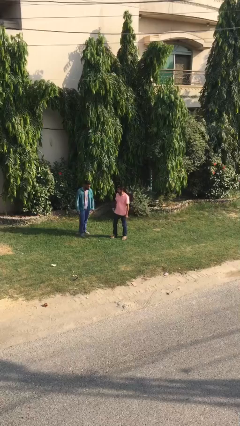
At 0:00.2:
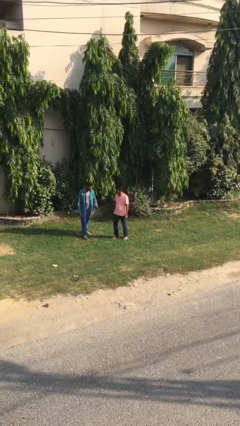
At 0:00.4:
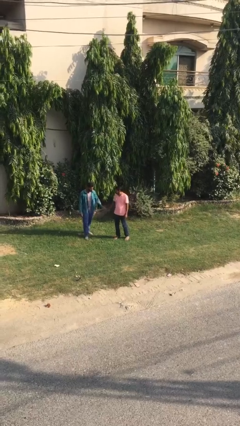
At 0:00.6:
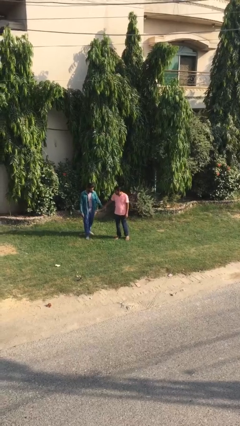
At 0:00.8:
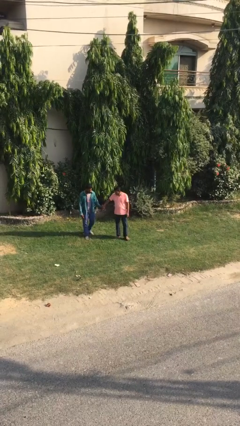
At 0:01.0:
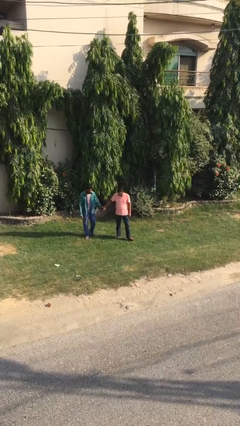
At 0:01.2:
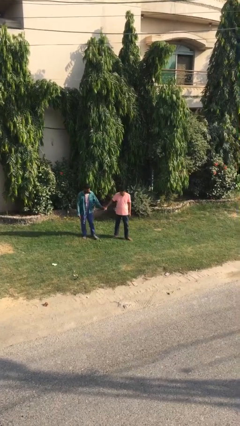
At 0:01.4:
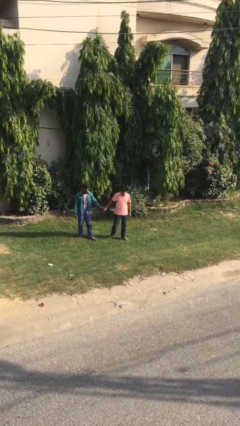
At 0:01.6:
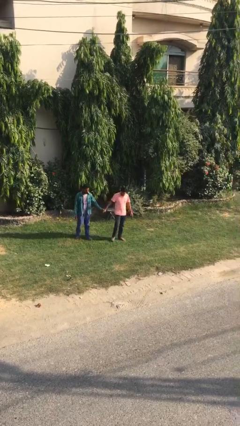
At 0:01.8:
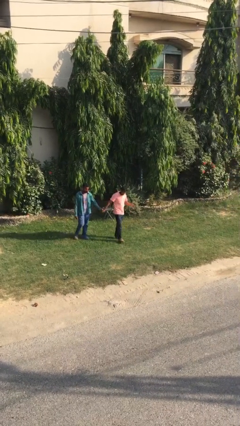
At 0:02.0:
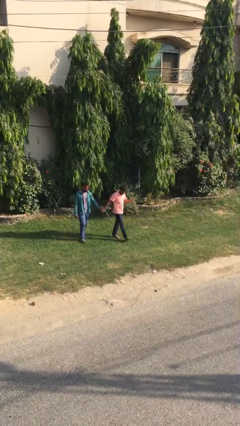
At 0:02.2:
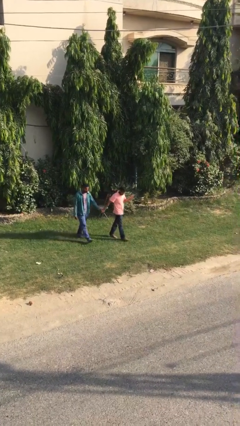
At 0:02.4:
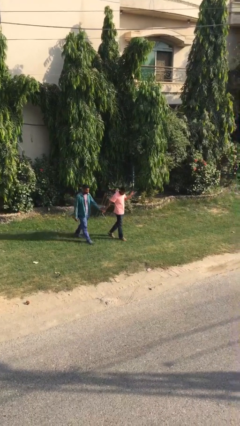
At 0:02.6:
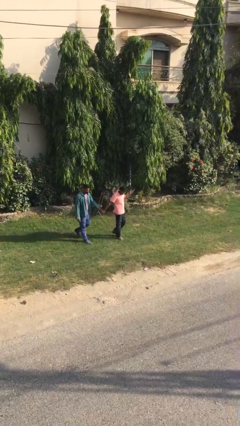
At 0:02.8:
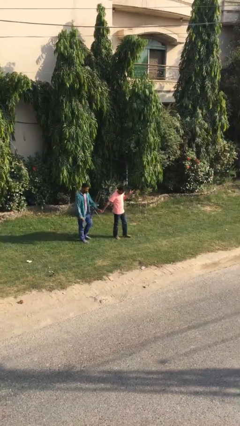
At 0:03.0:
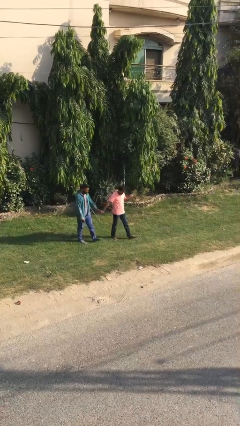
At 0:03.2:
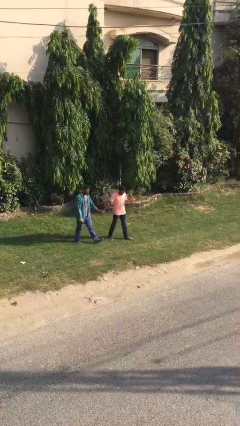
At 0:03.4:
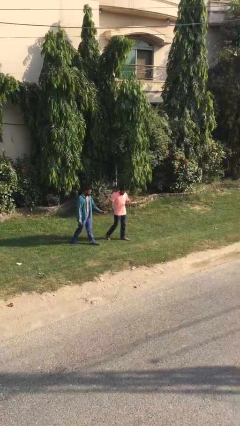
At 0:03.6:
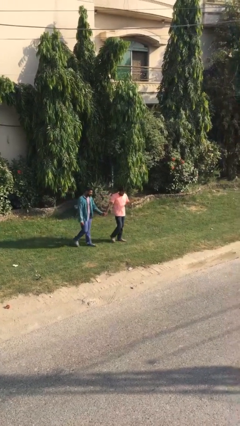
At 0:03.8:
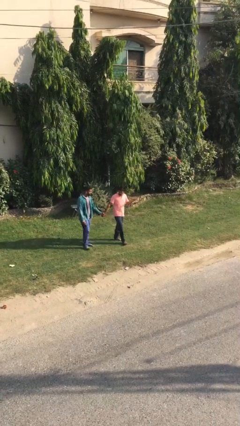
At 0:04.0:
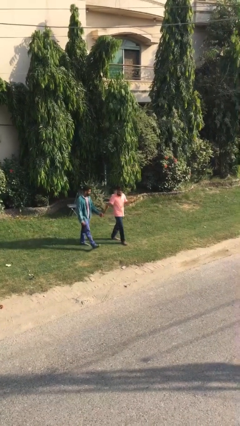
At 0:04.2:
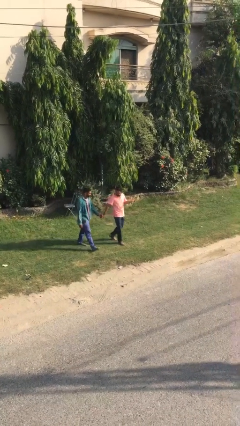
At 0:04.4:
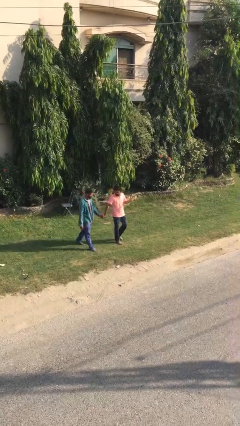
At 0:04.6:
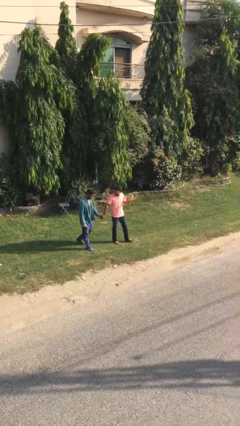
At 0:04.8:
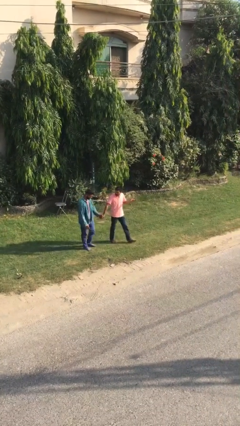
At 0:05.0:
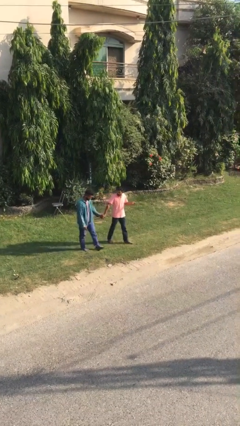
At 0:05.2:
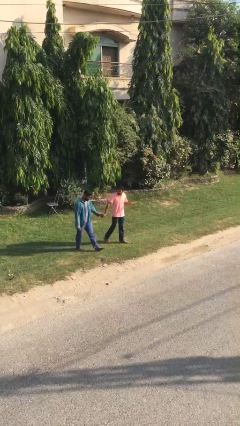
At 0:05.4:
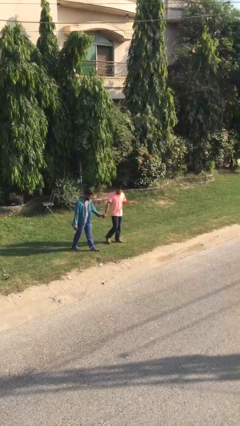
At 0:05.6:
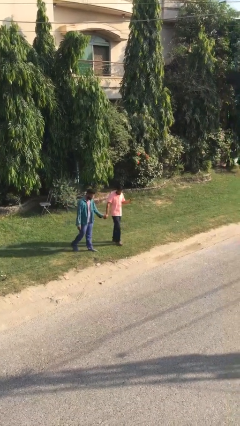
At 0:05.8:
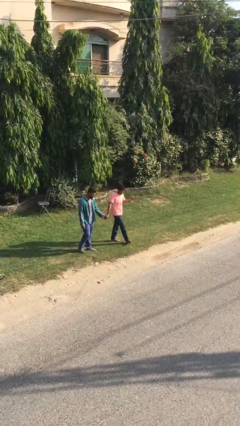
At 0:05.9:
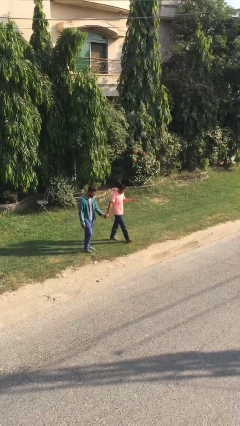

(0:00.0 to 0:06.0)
person holds hand

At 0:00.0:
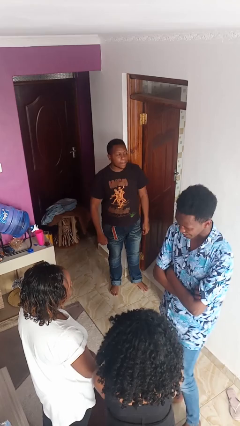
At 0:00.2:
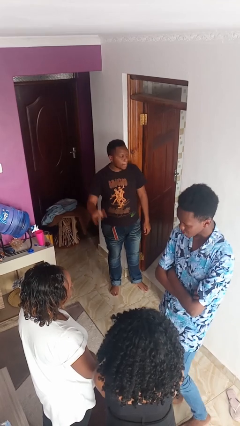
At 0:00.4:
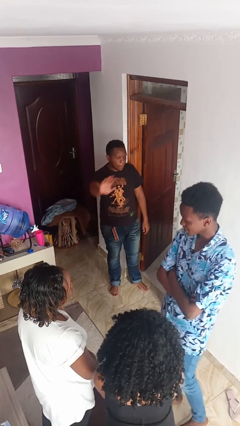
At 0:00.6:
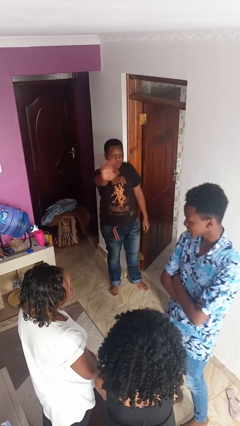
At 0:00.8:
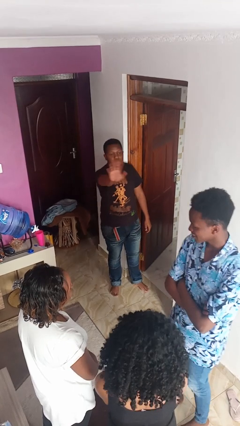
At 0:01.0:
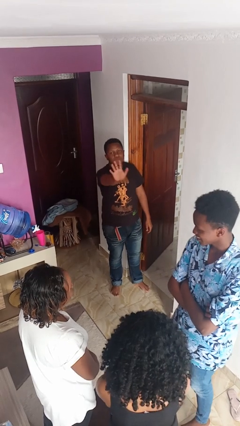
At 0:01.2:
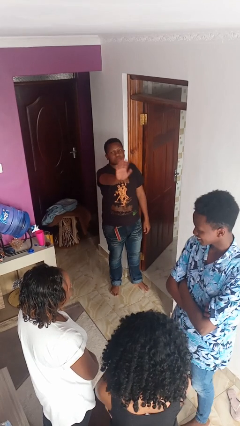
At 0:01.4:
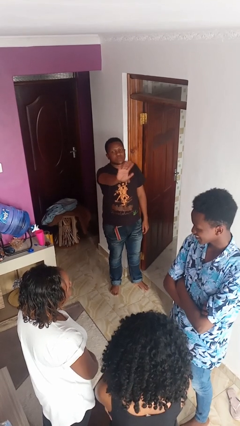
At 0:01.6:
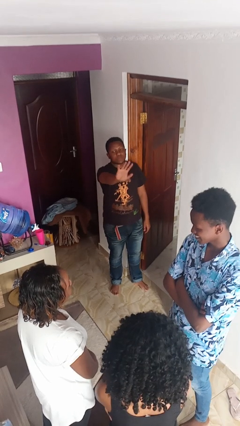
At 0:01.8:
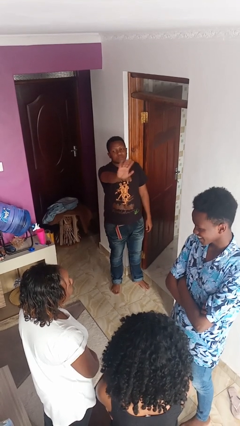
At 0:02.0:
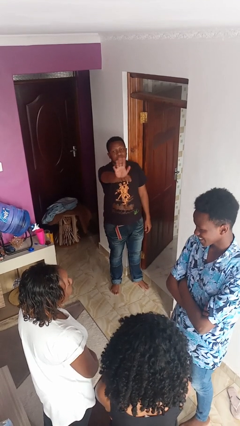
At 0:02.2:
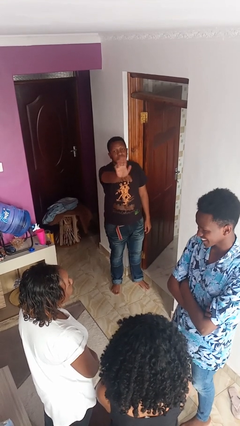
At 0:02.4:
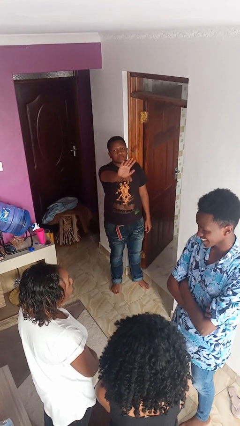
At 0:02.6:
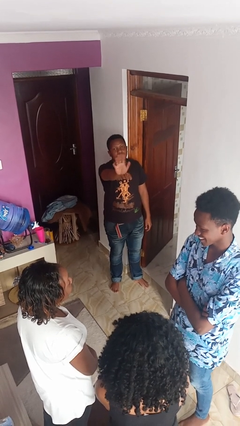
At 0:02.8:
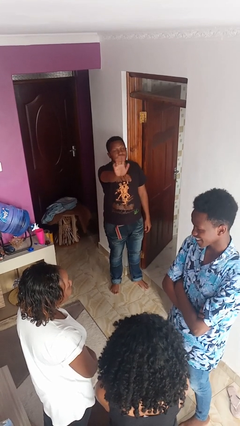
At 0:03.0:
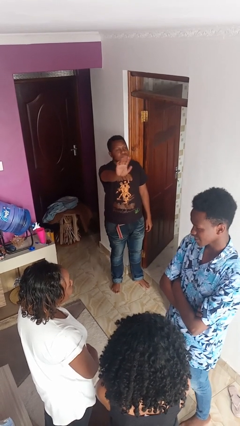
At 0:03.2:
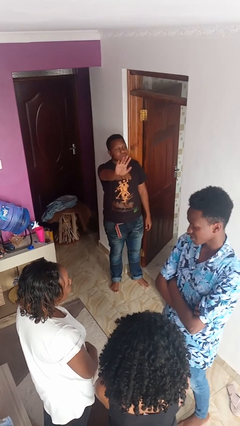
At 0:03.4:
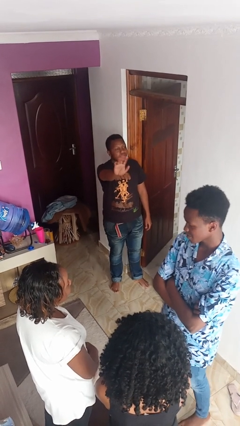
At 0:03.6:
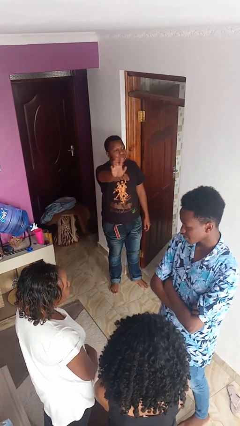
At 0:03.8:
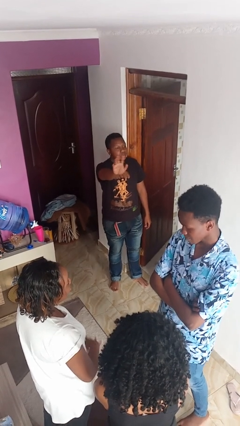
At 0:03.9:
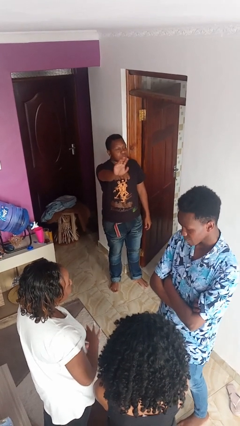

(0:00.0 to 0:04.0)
person waves at person

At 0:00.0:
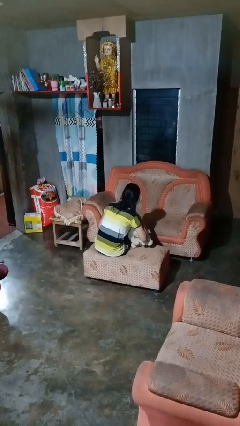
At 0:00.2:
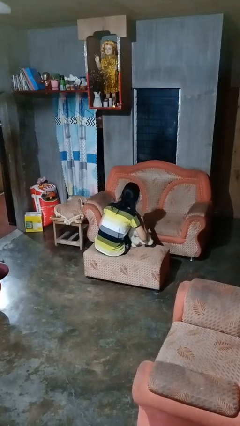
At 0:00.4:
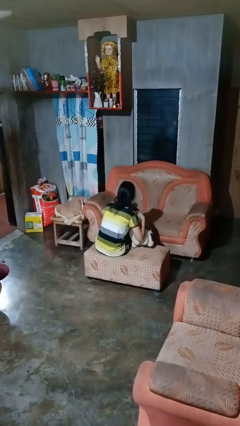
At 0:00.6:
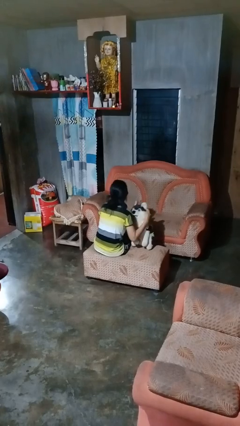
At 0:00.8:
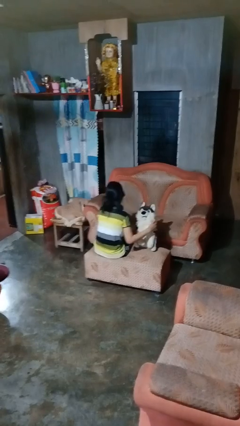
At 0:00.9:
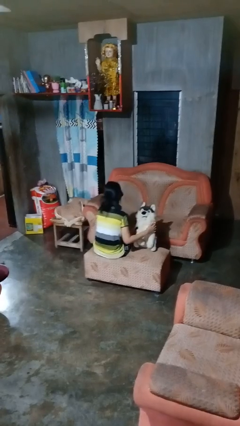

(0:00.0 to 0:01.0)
person hugs stuffed animal

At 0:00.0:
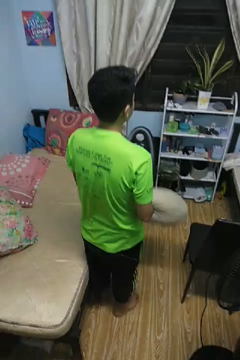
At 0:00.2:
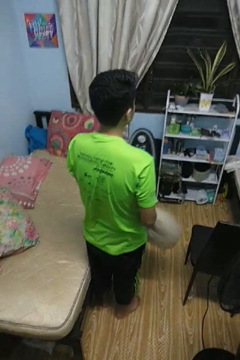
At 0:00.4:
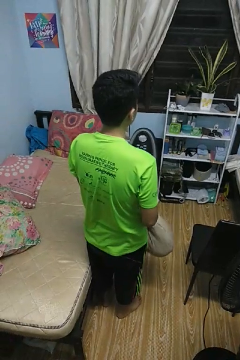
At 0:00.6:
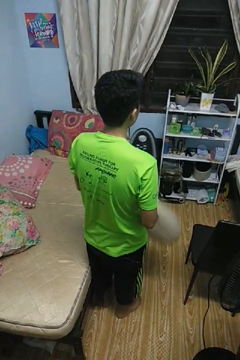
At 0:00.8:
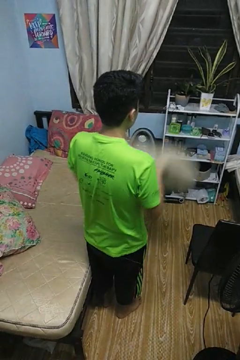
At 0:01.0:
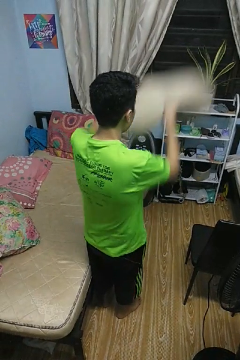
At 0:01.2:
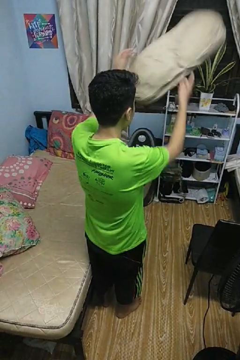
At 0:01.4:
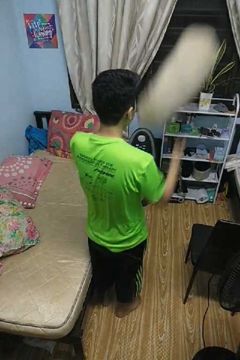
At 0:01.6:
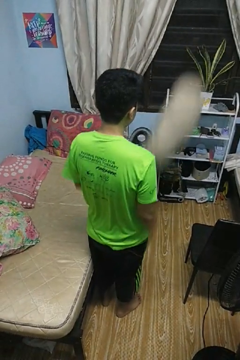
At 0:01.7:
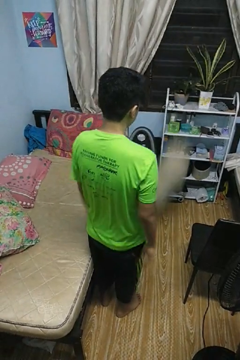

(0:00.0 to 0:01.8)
person throws object into air

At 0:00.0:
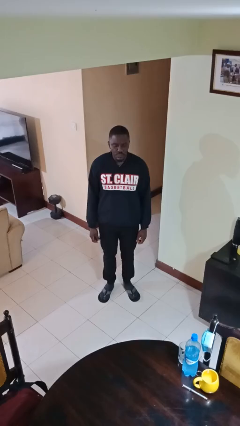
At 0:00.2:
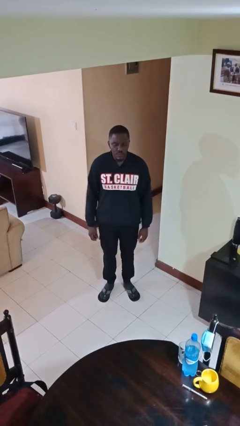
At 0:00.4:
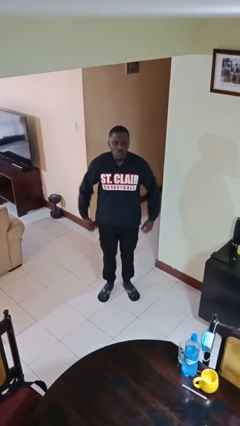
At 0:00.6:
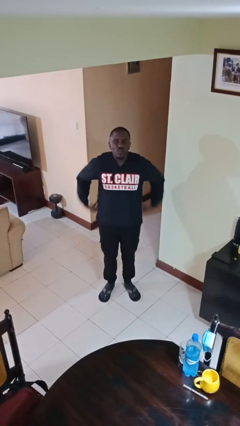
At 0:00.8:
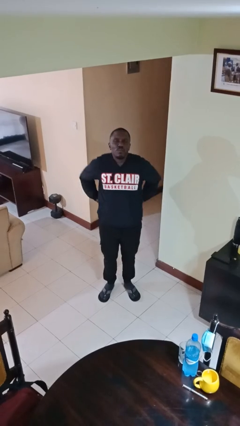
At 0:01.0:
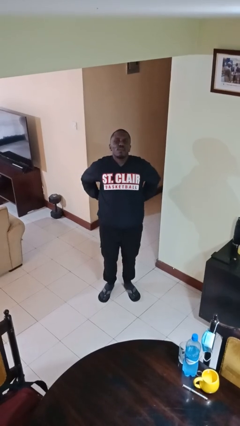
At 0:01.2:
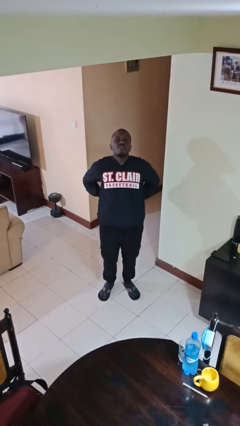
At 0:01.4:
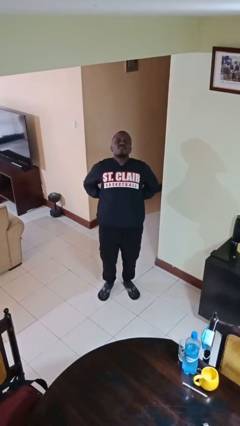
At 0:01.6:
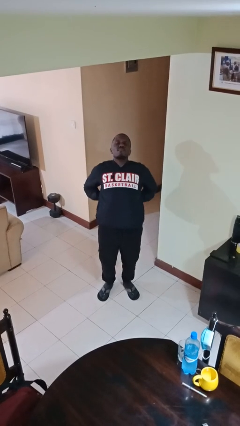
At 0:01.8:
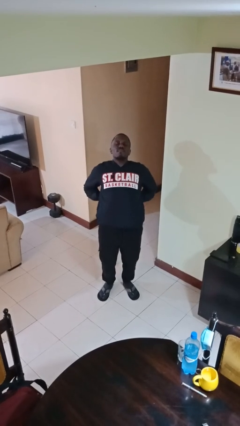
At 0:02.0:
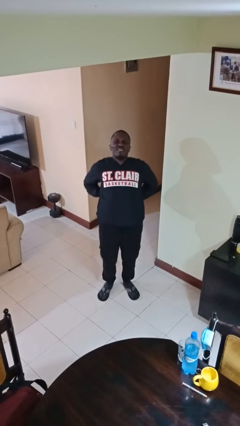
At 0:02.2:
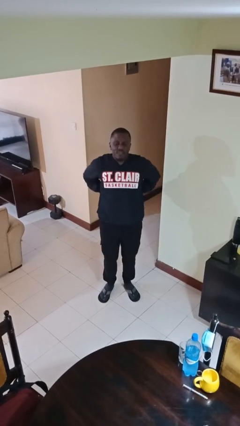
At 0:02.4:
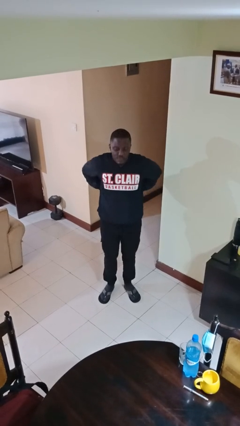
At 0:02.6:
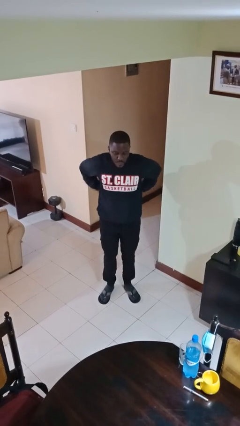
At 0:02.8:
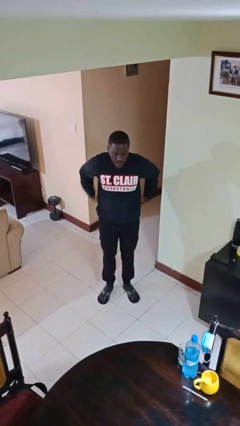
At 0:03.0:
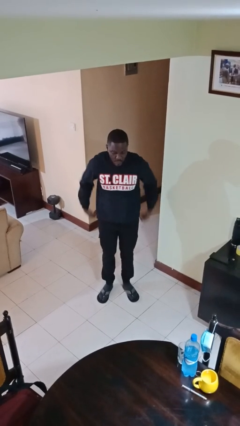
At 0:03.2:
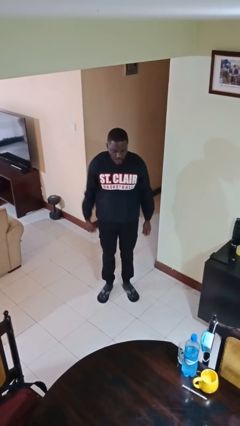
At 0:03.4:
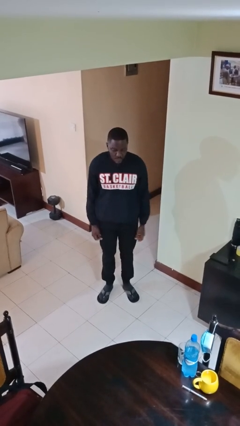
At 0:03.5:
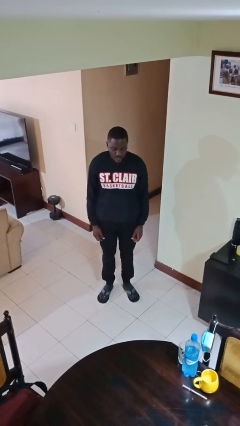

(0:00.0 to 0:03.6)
person stretches back

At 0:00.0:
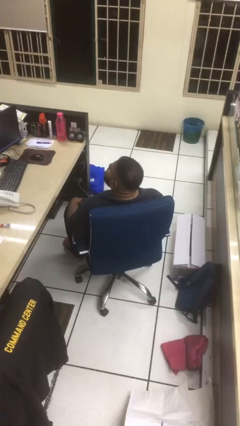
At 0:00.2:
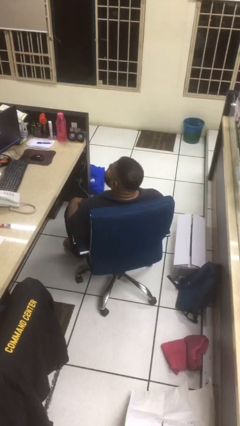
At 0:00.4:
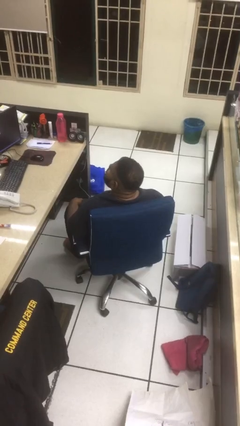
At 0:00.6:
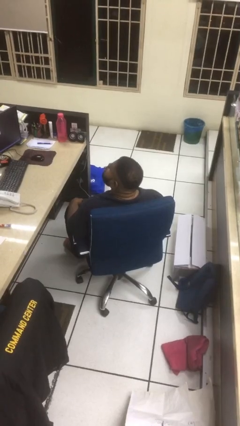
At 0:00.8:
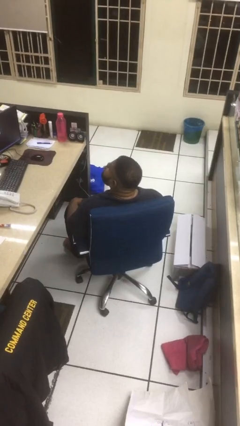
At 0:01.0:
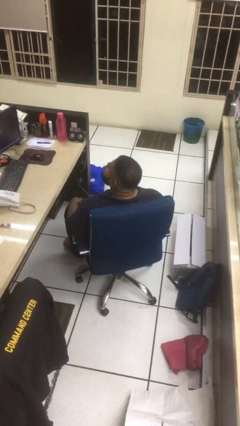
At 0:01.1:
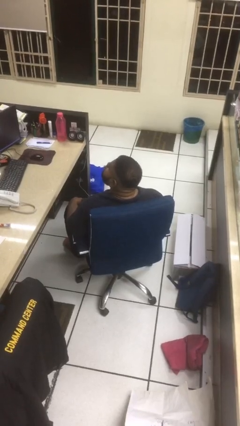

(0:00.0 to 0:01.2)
person sticks out tongue

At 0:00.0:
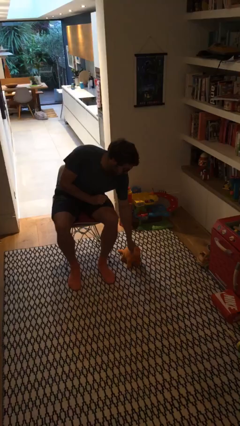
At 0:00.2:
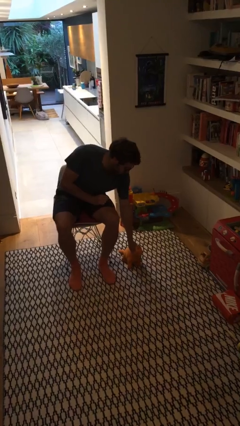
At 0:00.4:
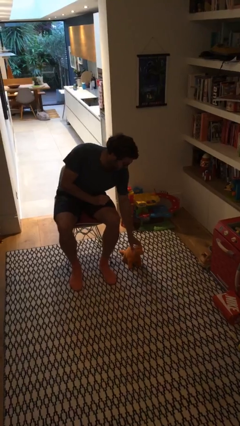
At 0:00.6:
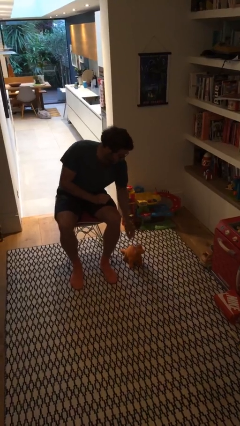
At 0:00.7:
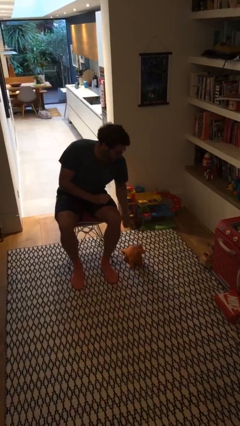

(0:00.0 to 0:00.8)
person puts down object on floor
